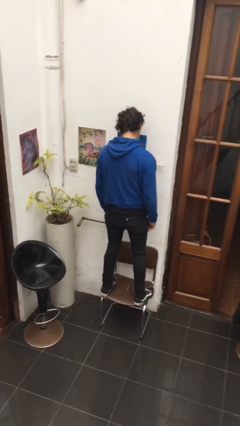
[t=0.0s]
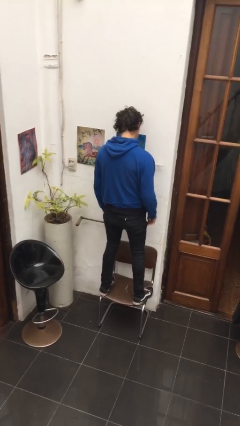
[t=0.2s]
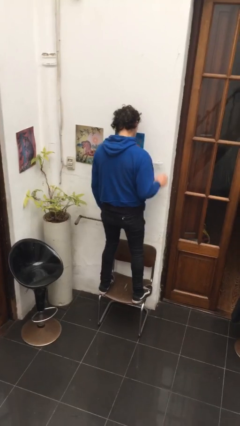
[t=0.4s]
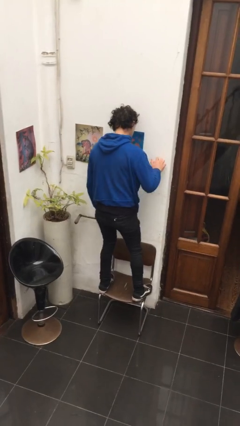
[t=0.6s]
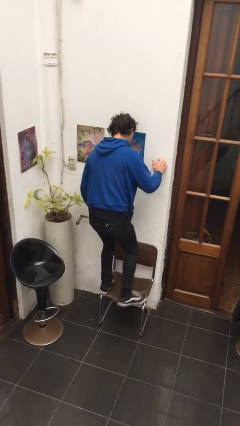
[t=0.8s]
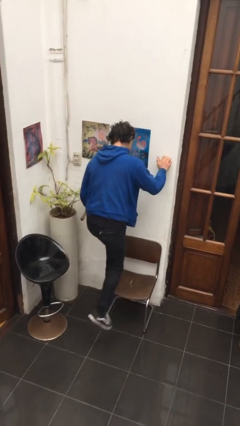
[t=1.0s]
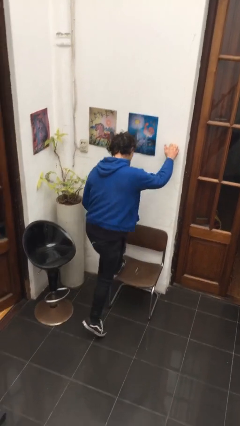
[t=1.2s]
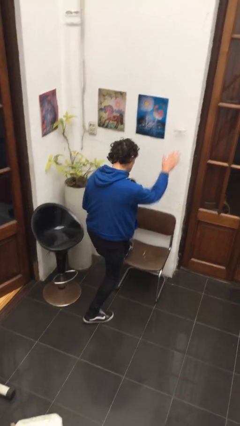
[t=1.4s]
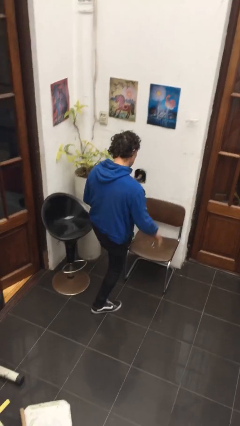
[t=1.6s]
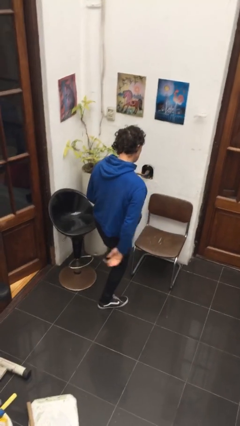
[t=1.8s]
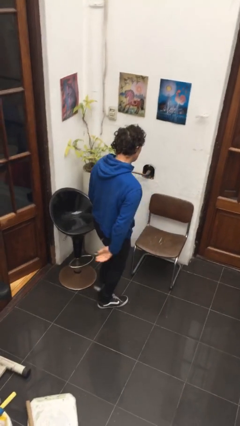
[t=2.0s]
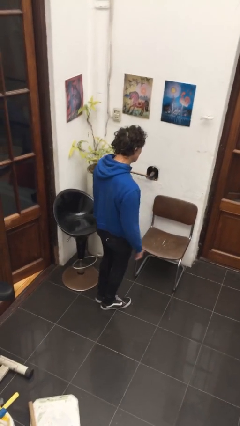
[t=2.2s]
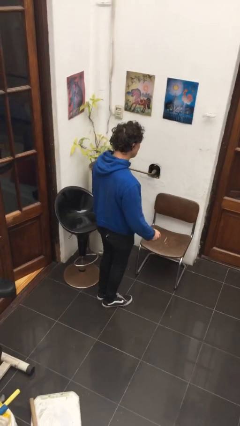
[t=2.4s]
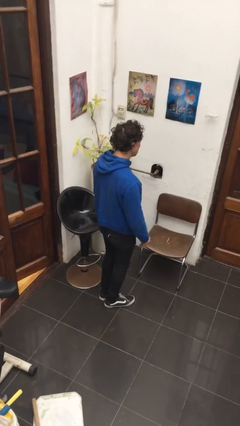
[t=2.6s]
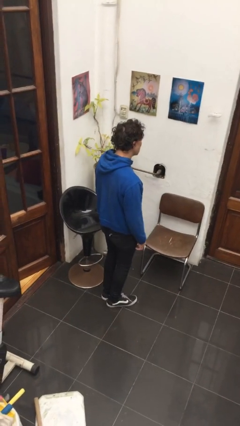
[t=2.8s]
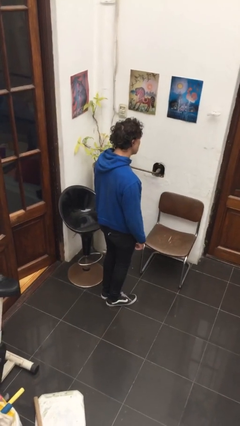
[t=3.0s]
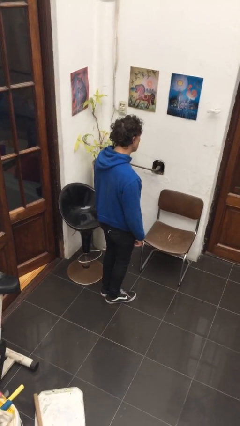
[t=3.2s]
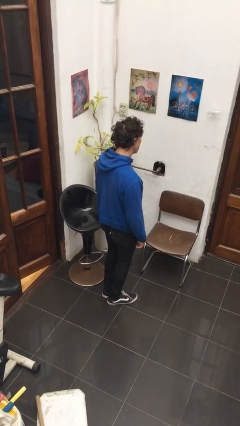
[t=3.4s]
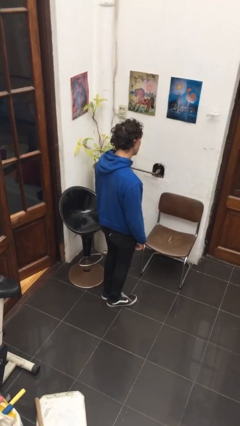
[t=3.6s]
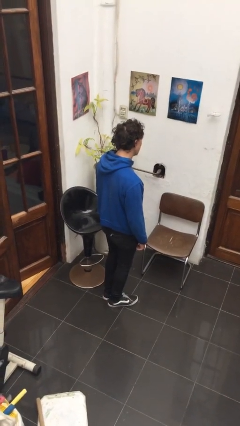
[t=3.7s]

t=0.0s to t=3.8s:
person climbs off chair

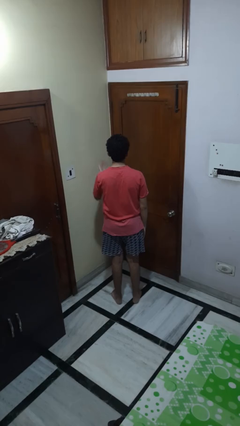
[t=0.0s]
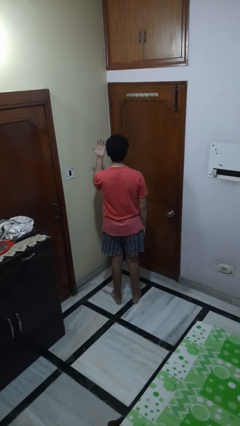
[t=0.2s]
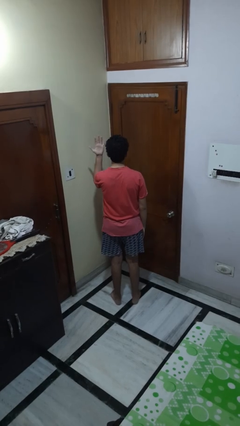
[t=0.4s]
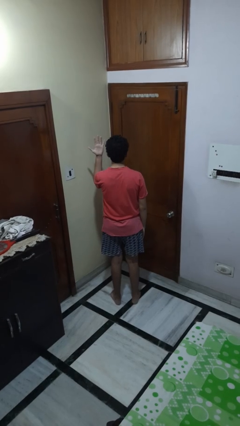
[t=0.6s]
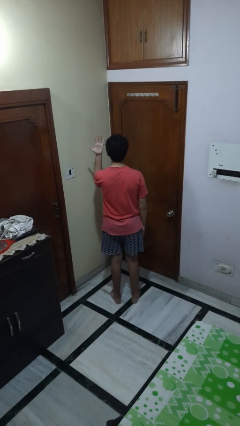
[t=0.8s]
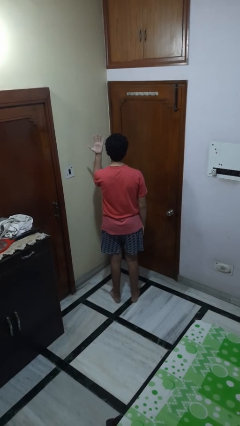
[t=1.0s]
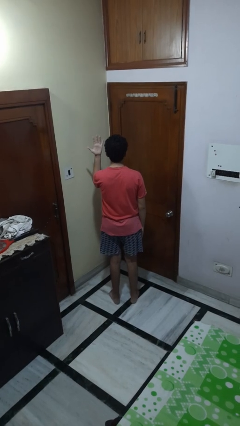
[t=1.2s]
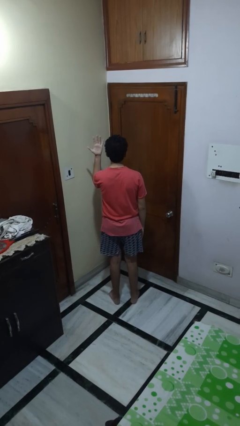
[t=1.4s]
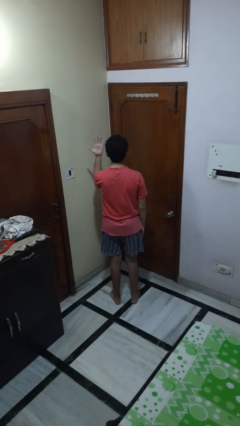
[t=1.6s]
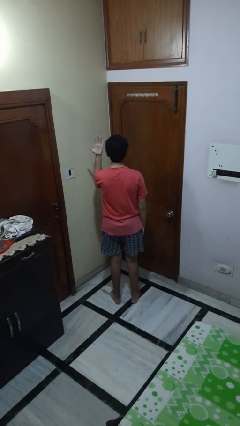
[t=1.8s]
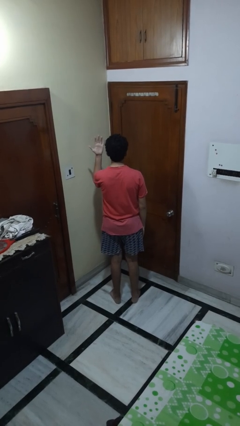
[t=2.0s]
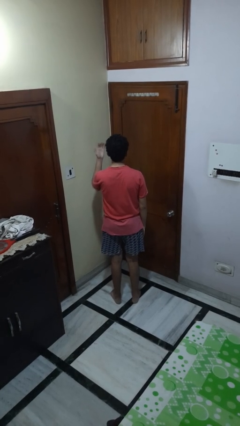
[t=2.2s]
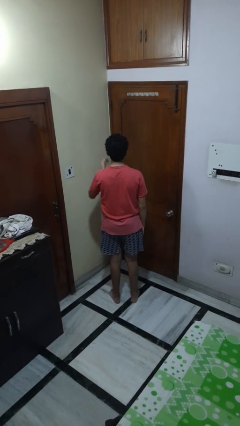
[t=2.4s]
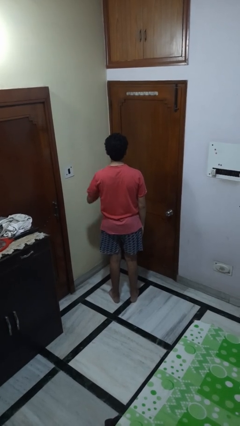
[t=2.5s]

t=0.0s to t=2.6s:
person gestures number five

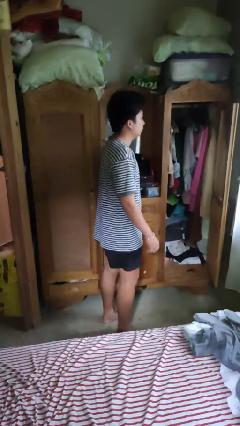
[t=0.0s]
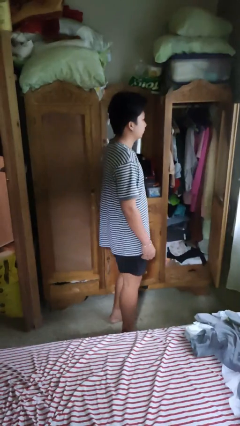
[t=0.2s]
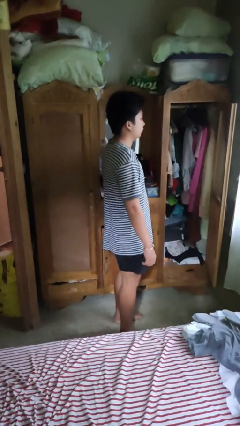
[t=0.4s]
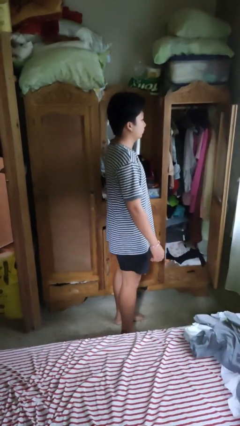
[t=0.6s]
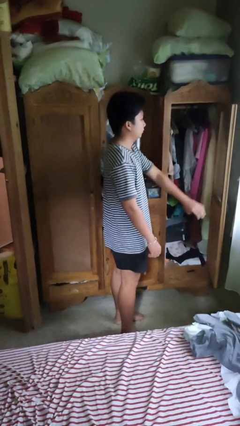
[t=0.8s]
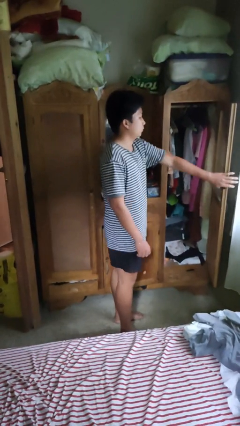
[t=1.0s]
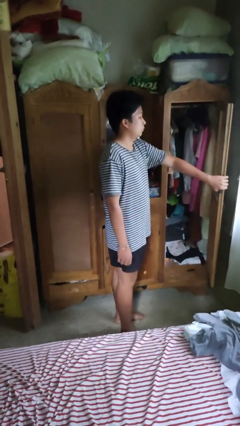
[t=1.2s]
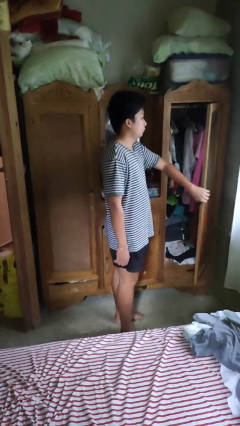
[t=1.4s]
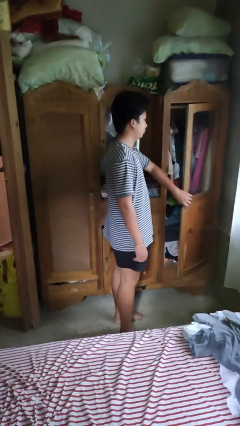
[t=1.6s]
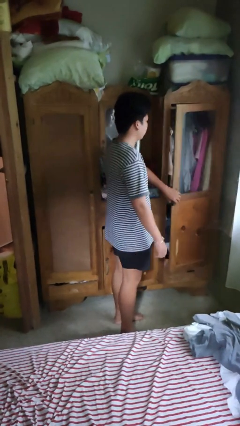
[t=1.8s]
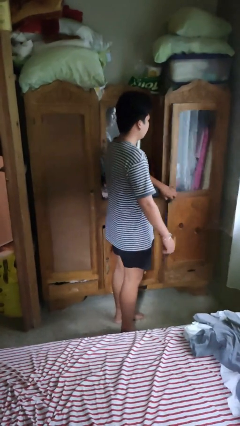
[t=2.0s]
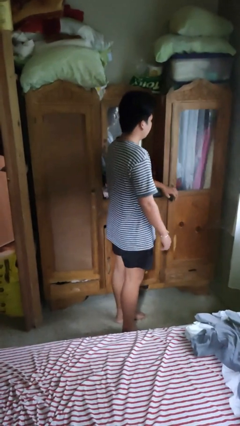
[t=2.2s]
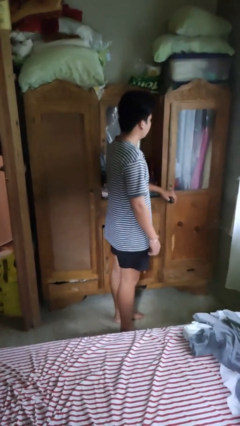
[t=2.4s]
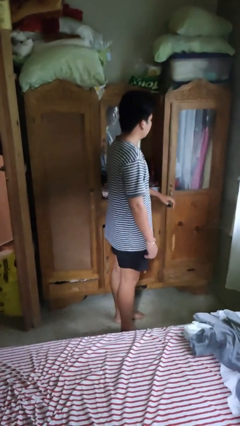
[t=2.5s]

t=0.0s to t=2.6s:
person closes closet door

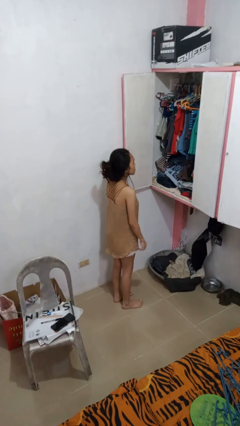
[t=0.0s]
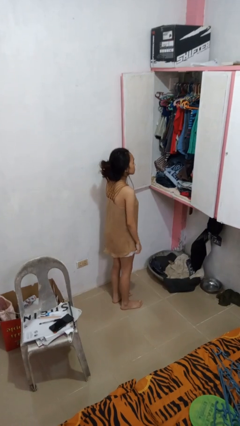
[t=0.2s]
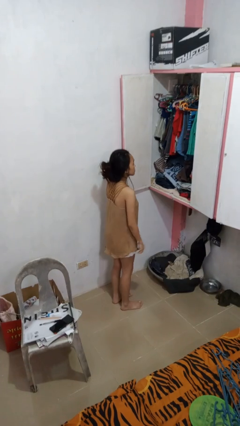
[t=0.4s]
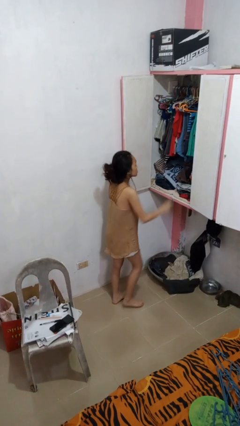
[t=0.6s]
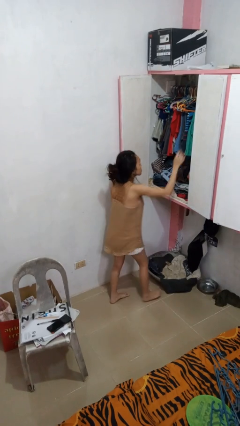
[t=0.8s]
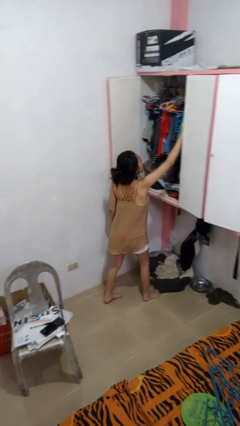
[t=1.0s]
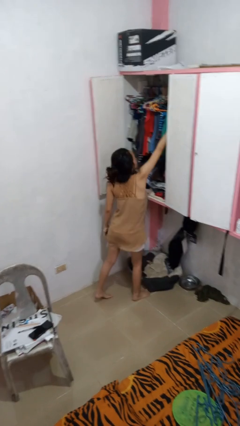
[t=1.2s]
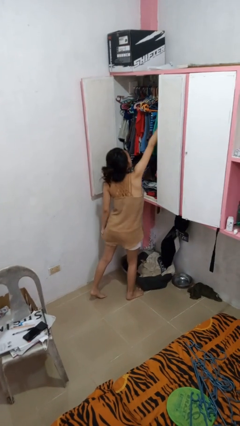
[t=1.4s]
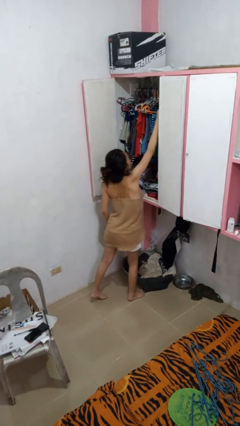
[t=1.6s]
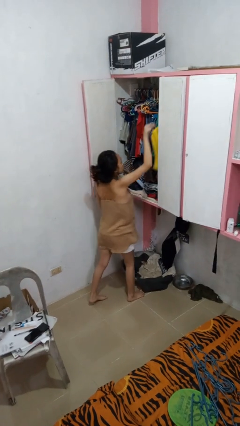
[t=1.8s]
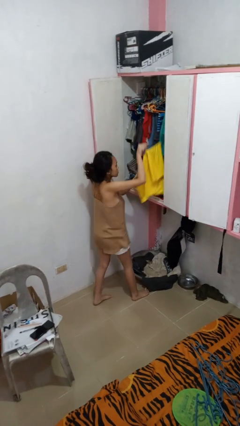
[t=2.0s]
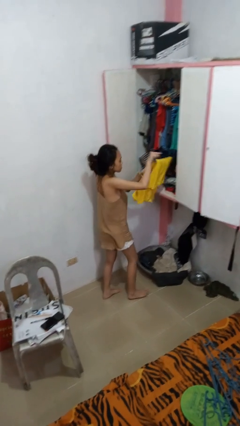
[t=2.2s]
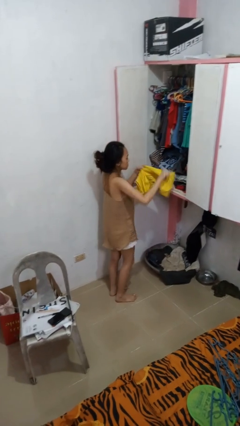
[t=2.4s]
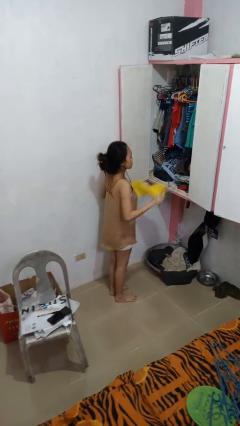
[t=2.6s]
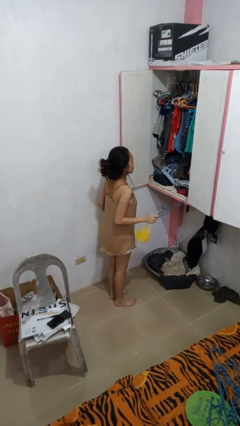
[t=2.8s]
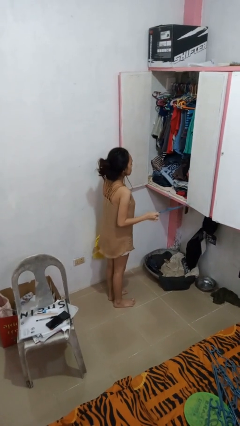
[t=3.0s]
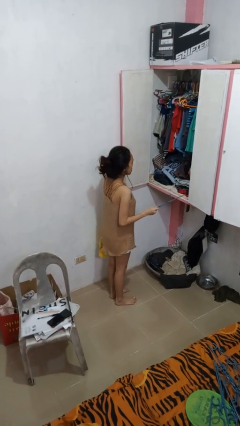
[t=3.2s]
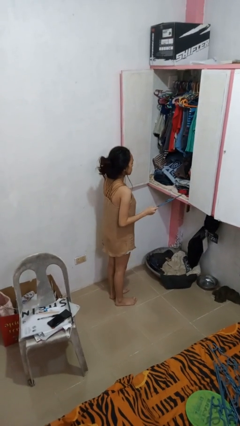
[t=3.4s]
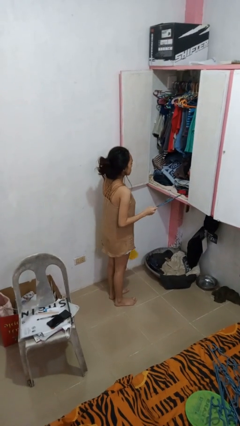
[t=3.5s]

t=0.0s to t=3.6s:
person takes clothes from closet

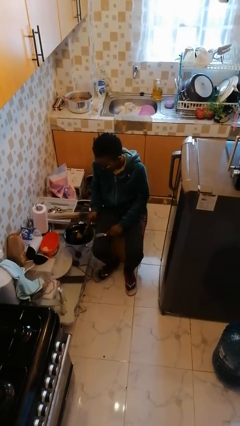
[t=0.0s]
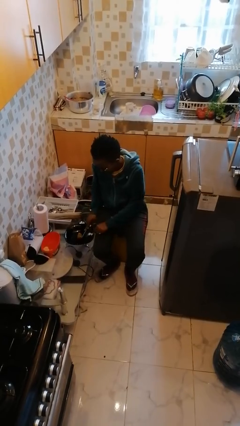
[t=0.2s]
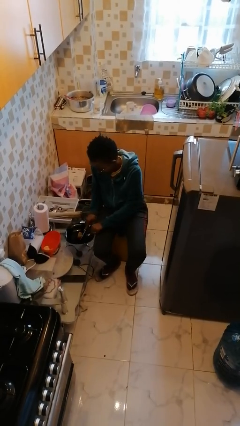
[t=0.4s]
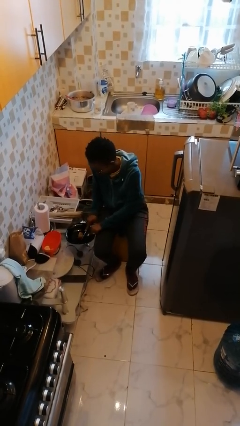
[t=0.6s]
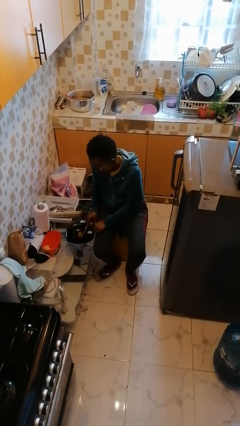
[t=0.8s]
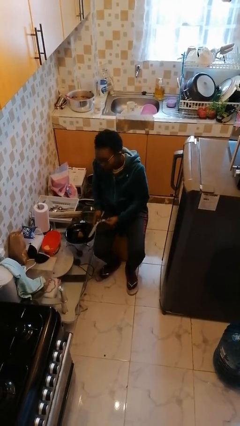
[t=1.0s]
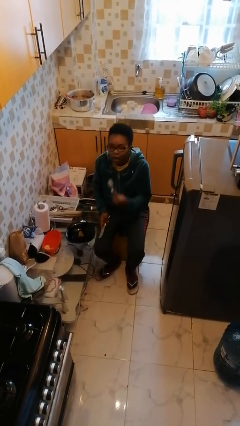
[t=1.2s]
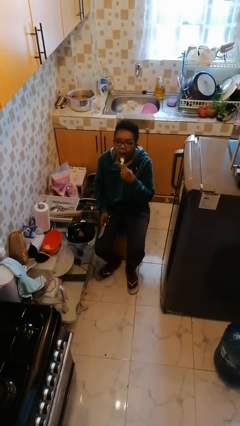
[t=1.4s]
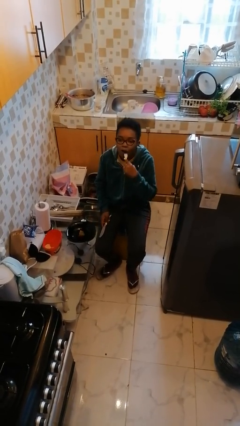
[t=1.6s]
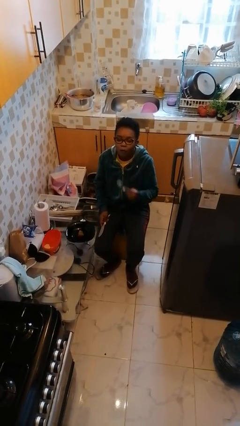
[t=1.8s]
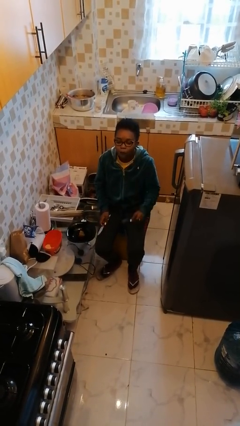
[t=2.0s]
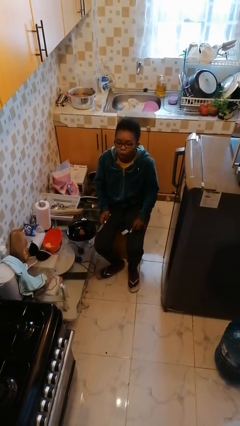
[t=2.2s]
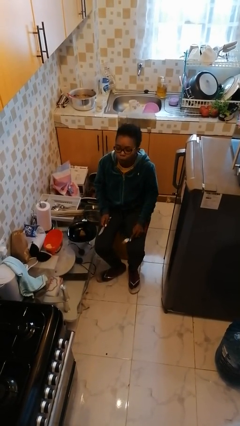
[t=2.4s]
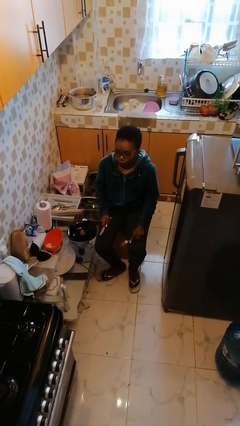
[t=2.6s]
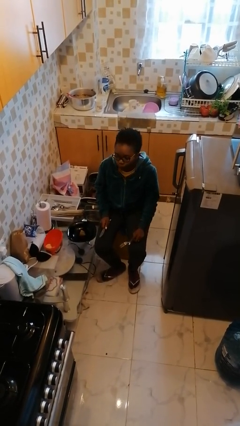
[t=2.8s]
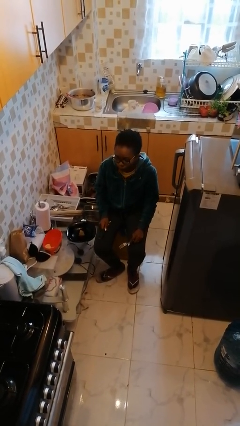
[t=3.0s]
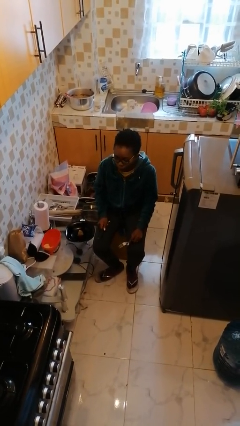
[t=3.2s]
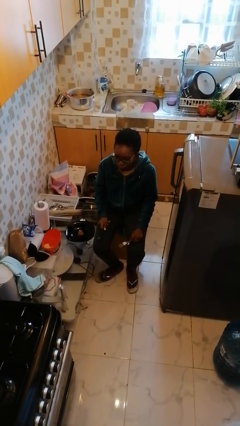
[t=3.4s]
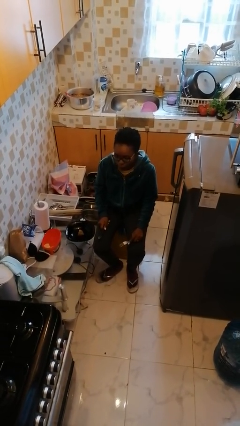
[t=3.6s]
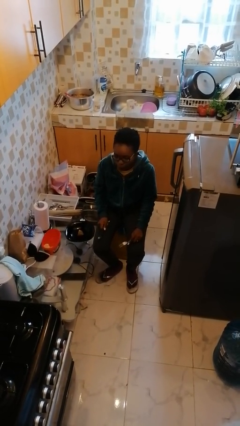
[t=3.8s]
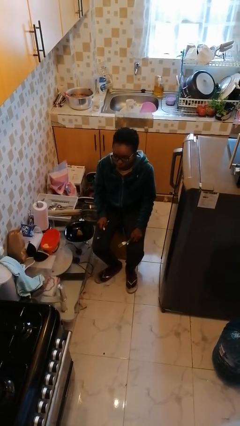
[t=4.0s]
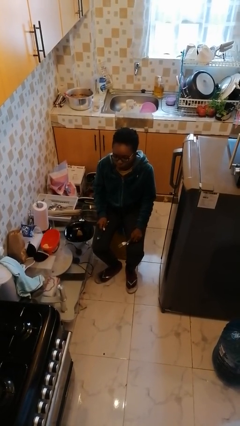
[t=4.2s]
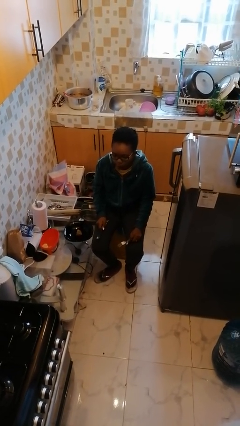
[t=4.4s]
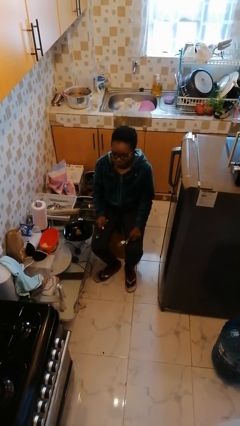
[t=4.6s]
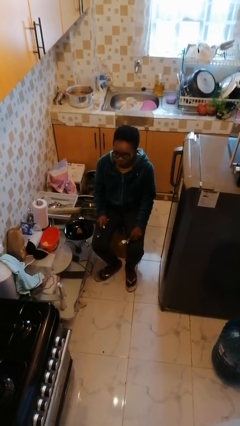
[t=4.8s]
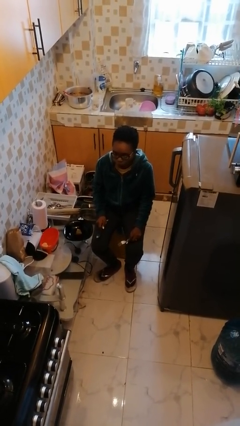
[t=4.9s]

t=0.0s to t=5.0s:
person eats with utensil
